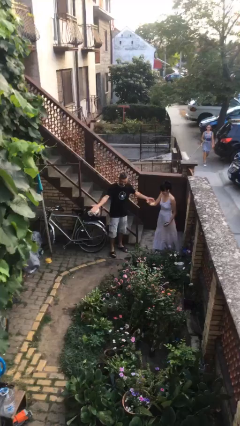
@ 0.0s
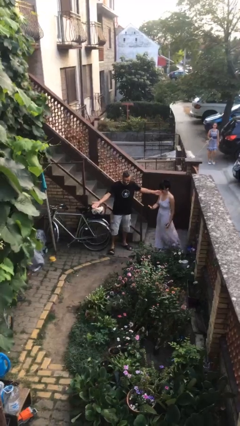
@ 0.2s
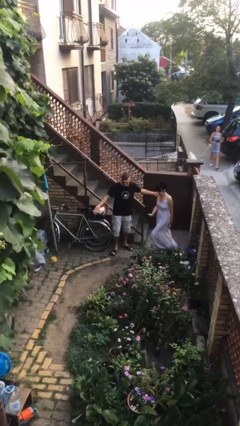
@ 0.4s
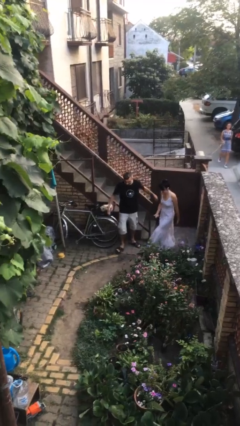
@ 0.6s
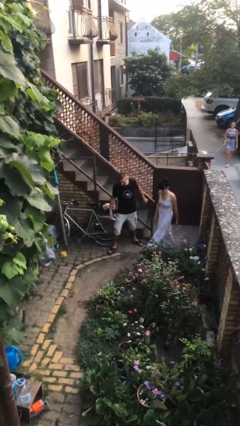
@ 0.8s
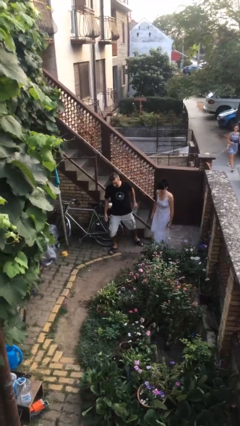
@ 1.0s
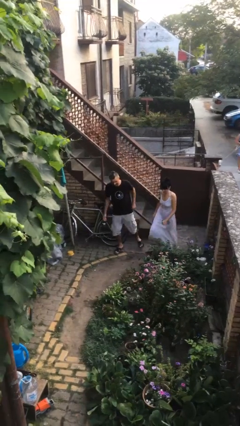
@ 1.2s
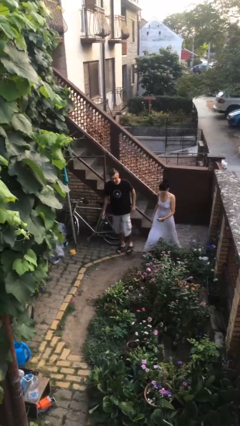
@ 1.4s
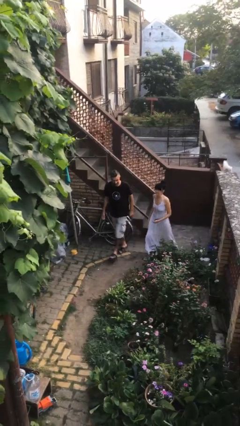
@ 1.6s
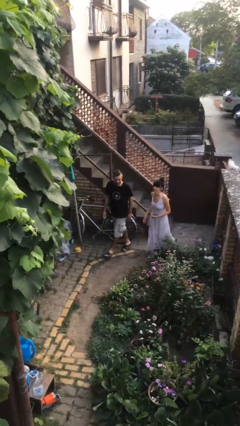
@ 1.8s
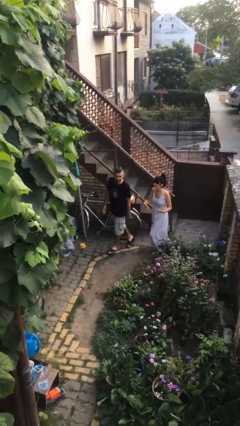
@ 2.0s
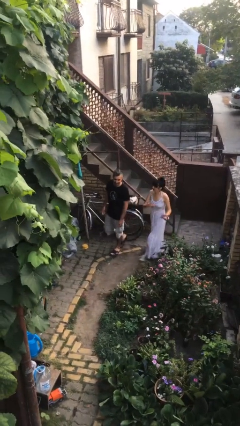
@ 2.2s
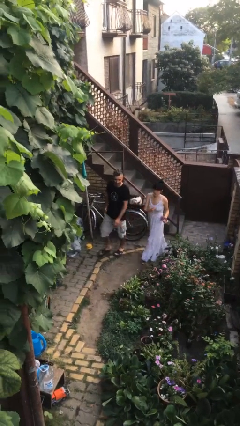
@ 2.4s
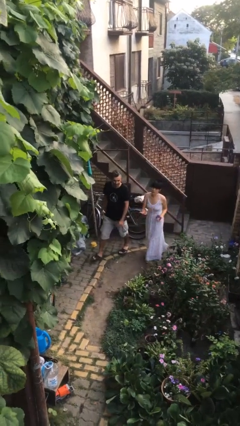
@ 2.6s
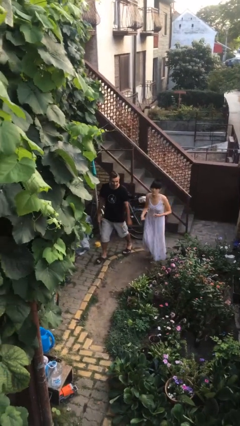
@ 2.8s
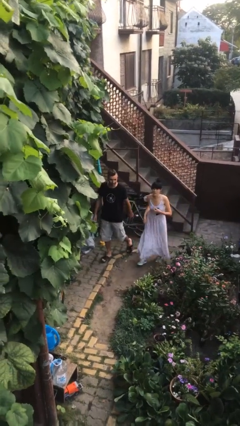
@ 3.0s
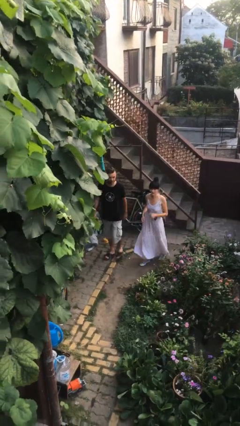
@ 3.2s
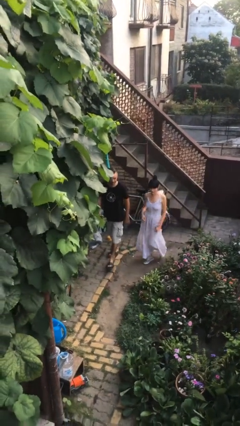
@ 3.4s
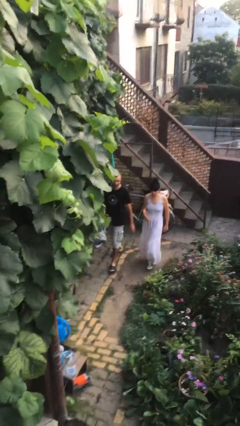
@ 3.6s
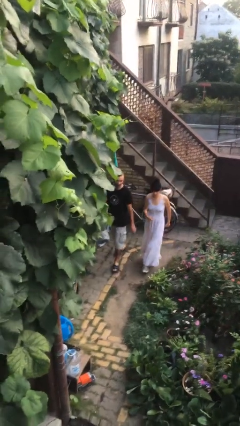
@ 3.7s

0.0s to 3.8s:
person talks to person

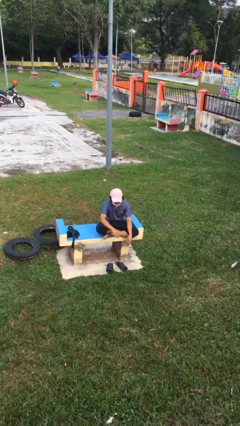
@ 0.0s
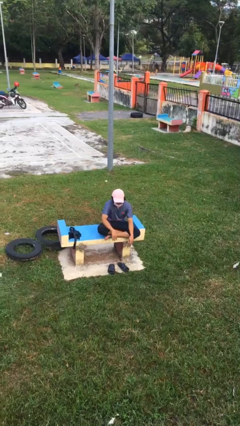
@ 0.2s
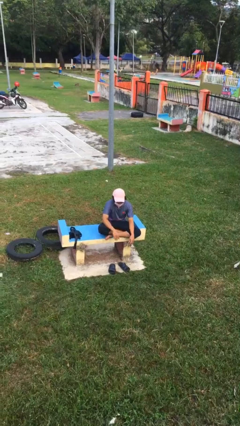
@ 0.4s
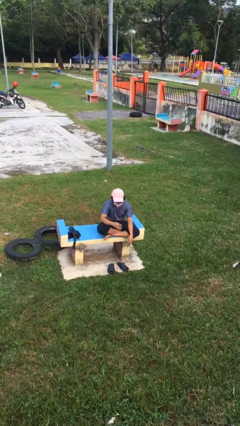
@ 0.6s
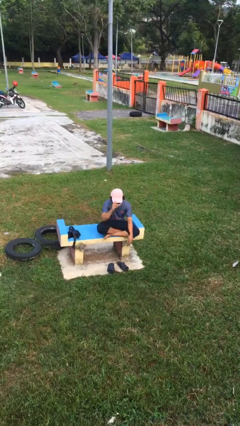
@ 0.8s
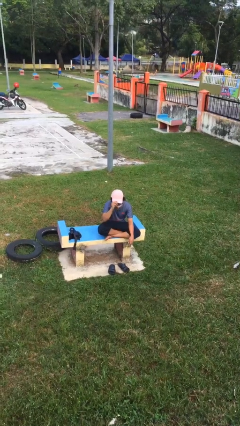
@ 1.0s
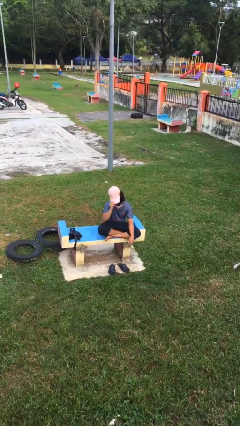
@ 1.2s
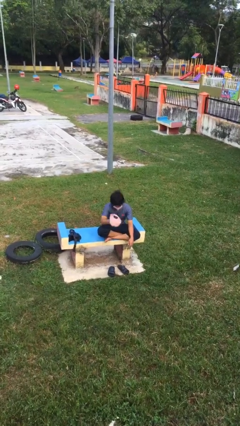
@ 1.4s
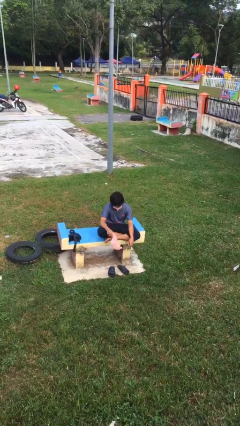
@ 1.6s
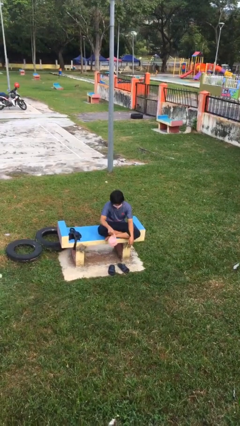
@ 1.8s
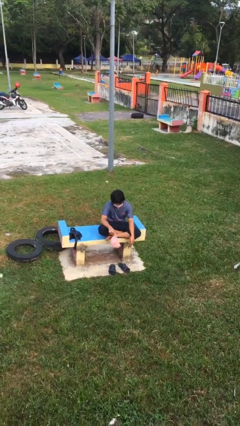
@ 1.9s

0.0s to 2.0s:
person takes off hat

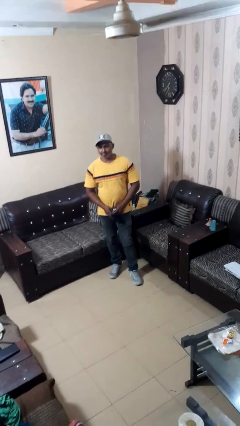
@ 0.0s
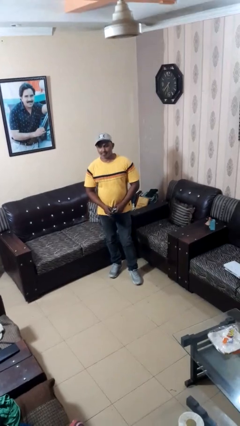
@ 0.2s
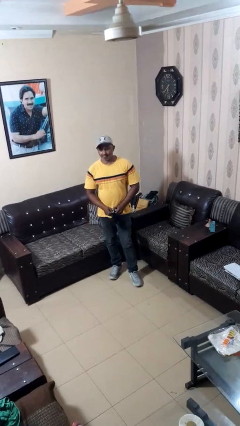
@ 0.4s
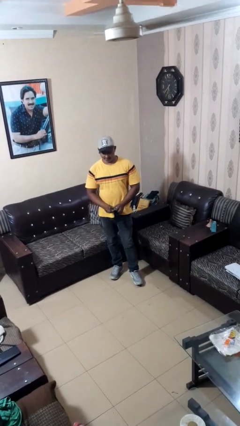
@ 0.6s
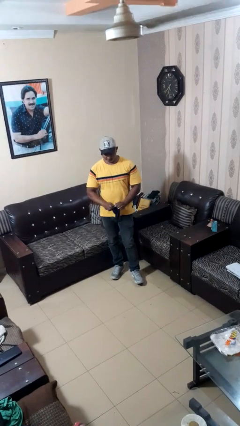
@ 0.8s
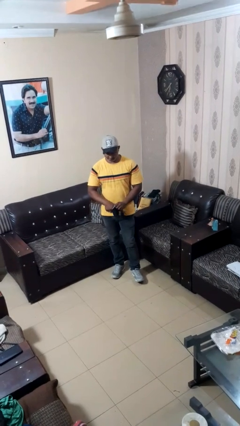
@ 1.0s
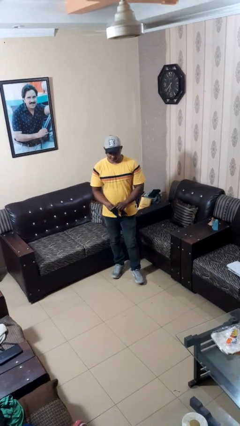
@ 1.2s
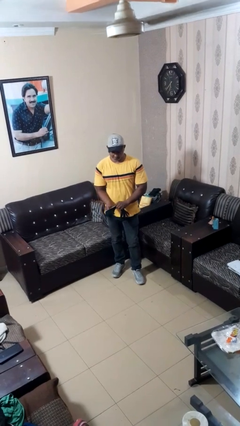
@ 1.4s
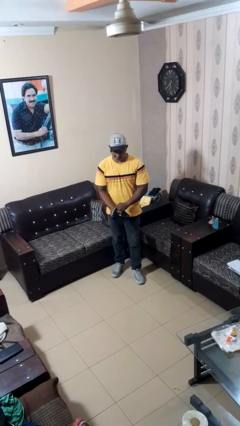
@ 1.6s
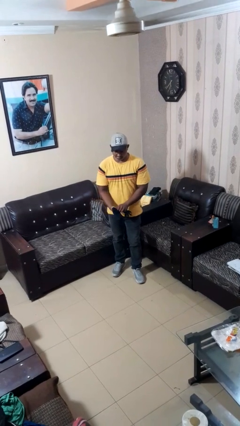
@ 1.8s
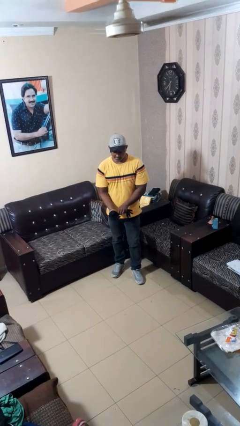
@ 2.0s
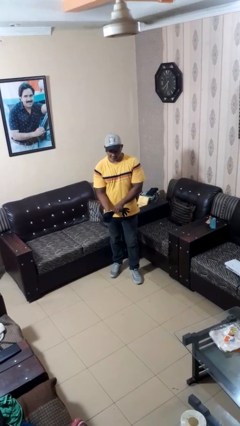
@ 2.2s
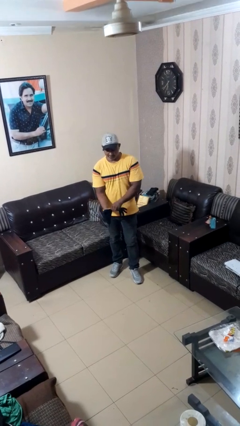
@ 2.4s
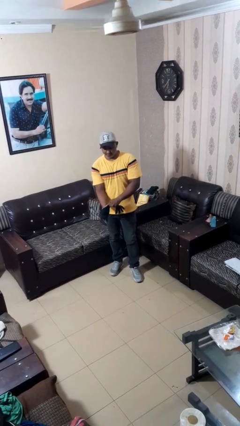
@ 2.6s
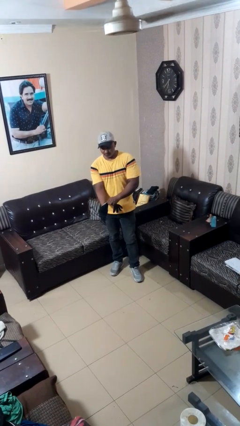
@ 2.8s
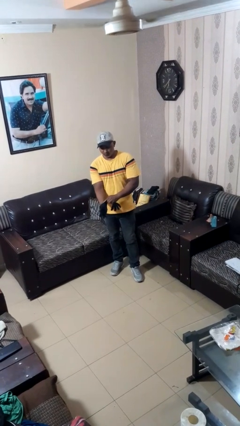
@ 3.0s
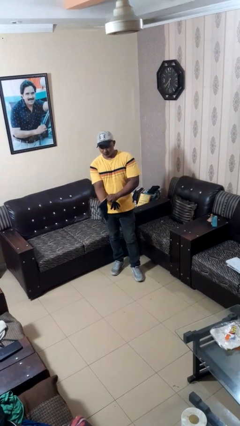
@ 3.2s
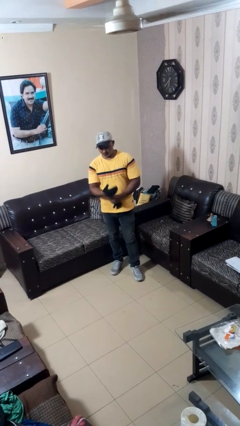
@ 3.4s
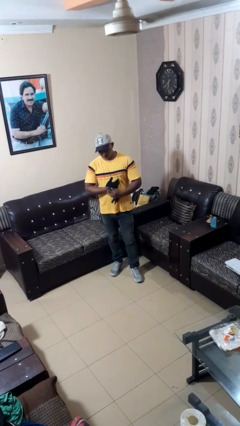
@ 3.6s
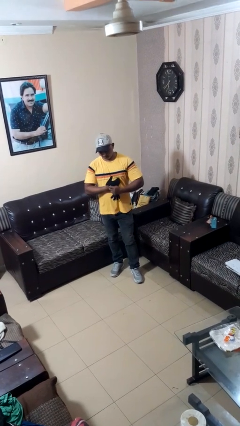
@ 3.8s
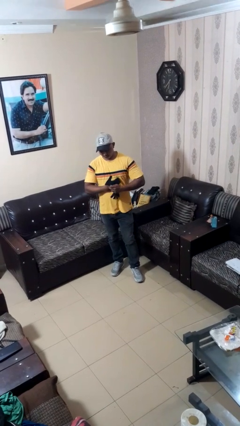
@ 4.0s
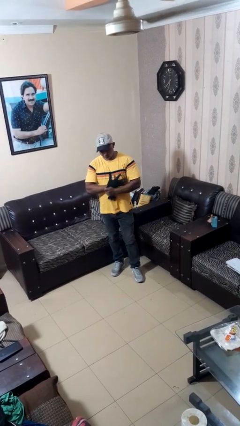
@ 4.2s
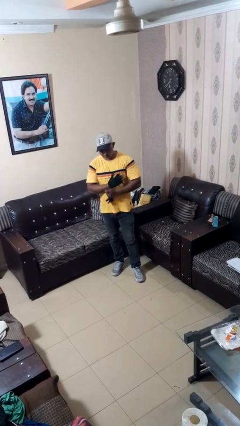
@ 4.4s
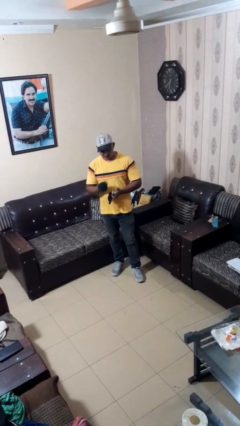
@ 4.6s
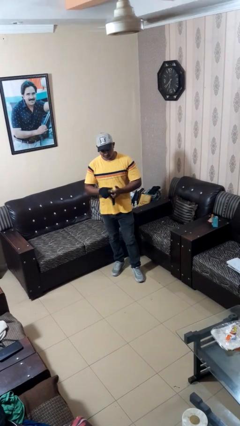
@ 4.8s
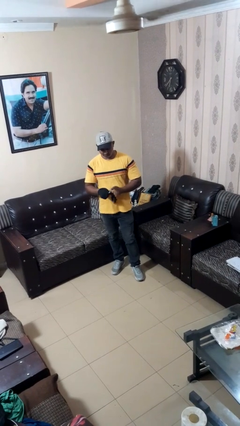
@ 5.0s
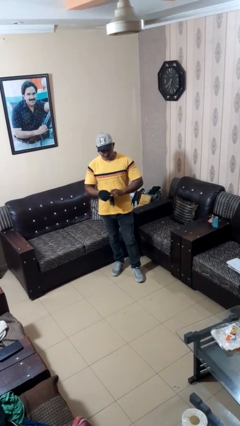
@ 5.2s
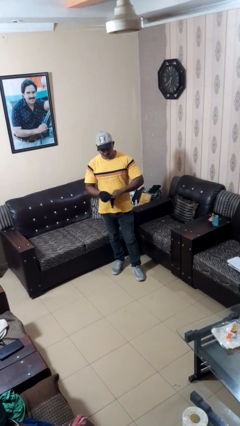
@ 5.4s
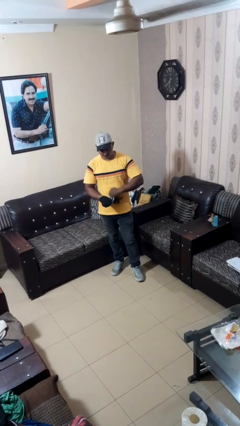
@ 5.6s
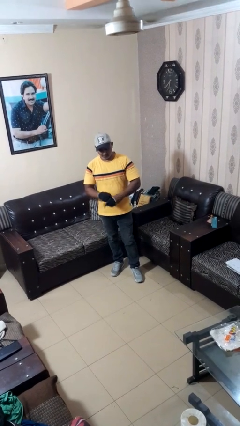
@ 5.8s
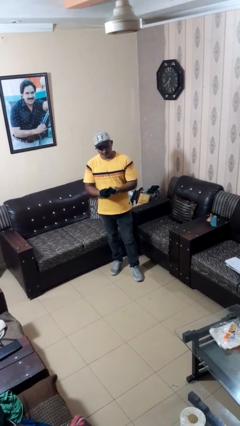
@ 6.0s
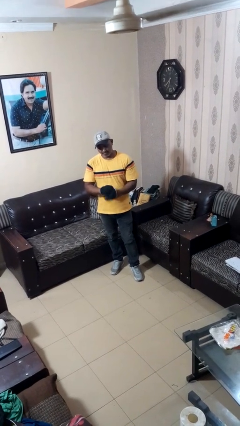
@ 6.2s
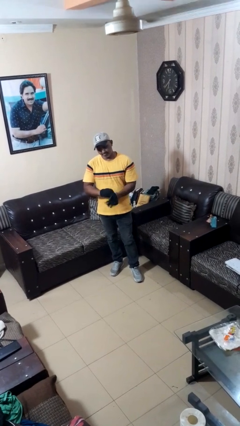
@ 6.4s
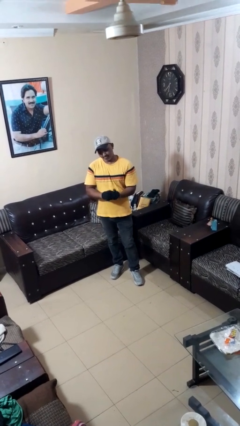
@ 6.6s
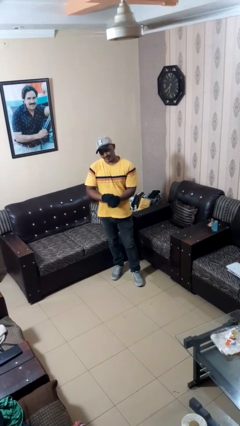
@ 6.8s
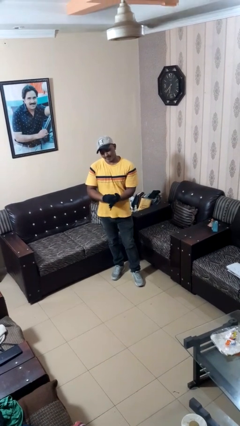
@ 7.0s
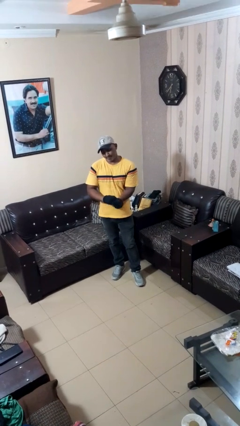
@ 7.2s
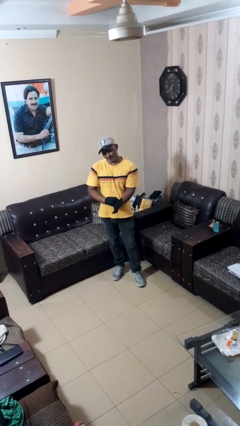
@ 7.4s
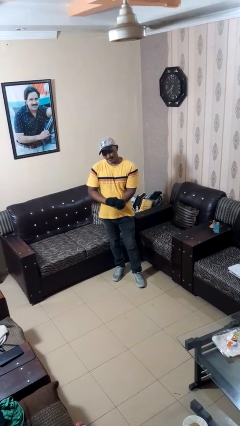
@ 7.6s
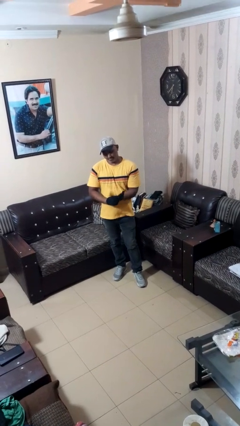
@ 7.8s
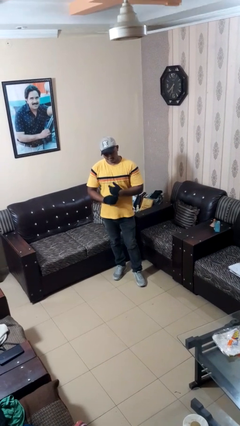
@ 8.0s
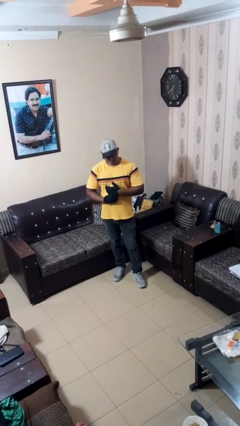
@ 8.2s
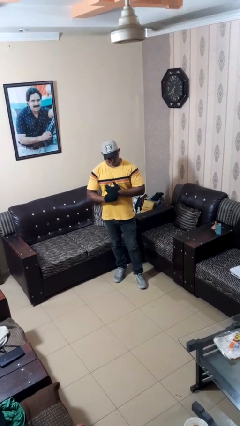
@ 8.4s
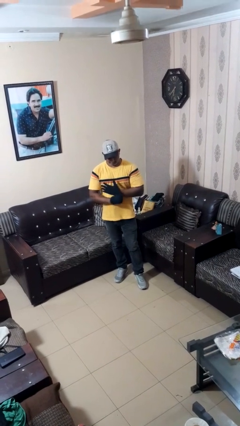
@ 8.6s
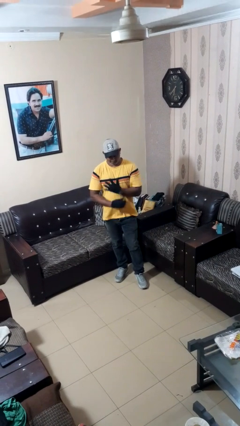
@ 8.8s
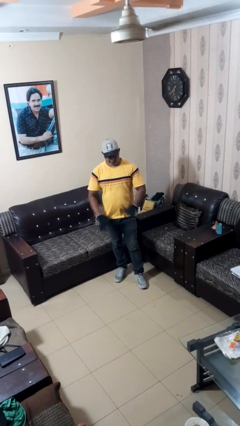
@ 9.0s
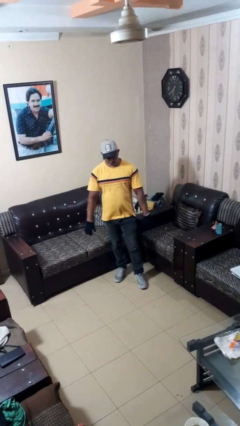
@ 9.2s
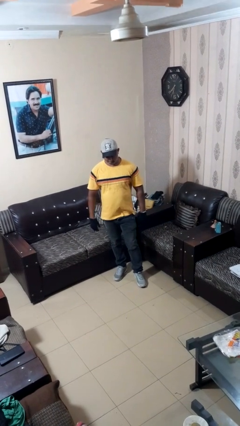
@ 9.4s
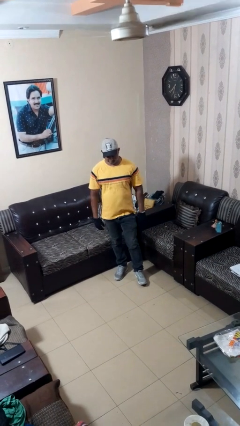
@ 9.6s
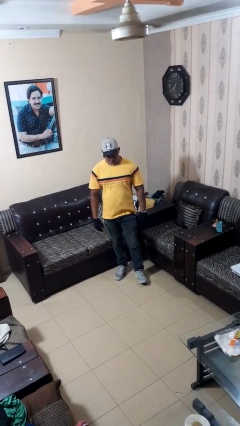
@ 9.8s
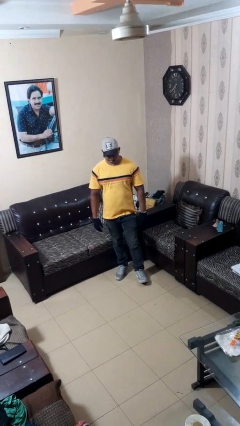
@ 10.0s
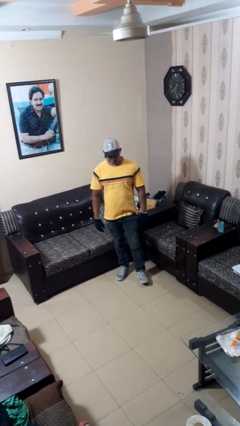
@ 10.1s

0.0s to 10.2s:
person puts on gloves

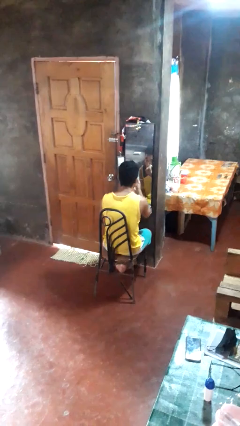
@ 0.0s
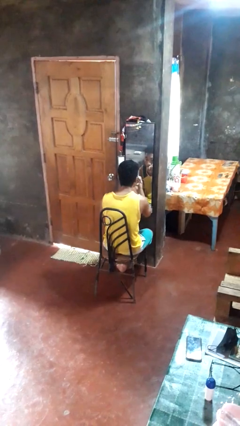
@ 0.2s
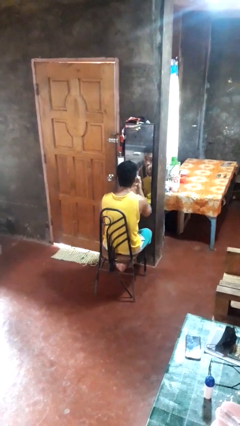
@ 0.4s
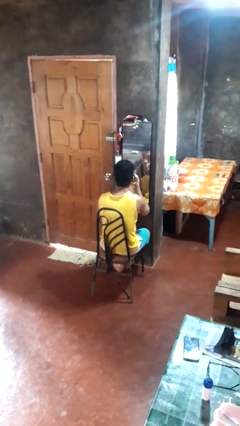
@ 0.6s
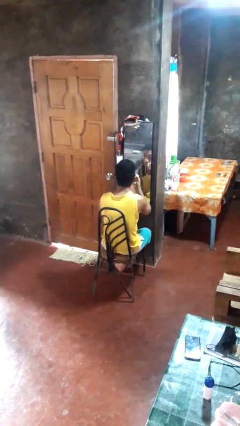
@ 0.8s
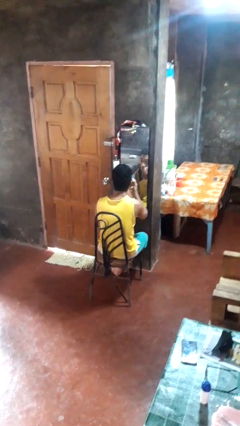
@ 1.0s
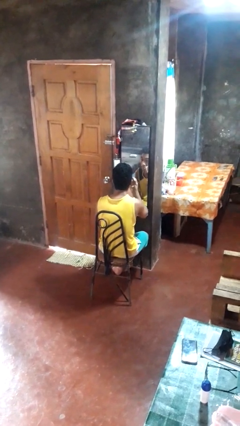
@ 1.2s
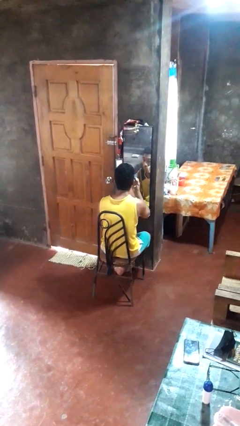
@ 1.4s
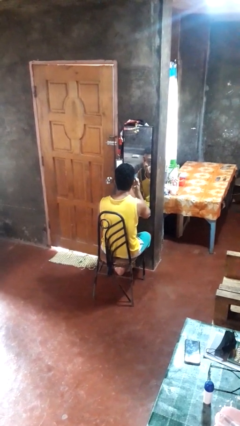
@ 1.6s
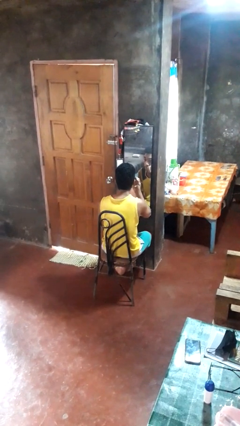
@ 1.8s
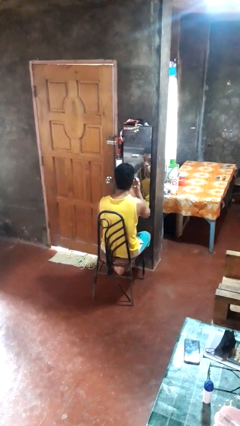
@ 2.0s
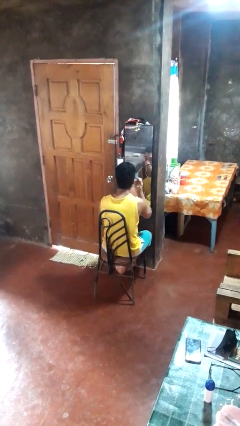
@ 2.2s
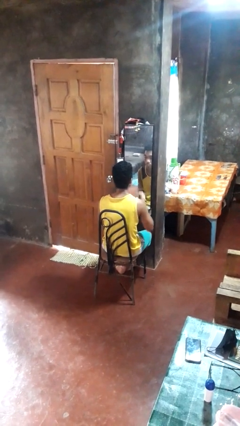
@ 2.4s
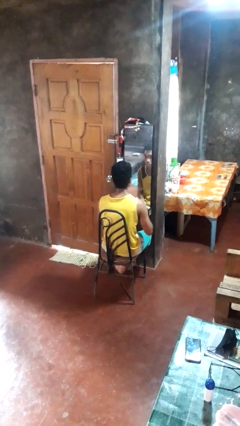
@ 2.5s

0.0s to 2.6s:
person applies eye makeup
